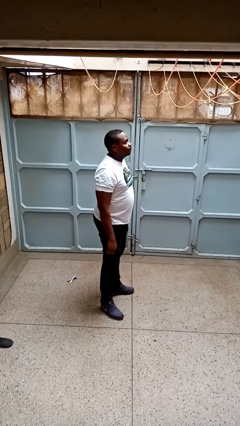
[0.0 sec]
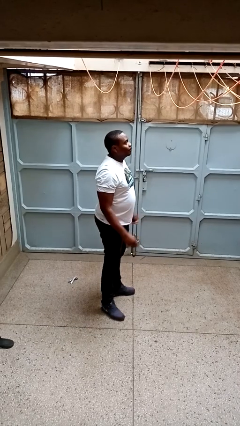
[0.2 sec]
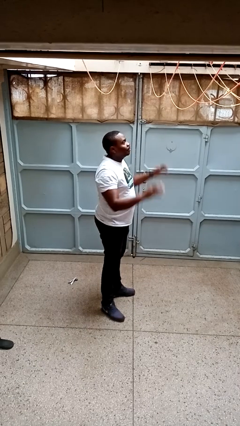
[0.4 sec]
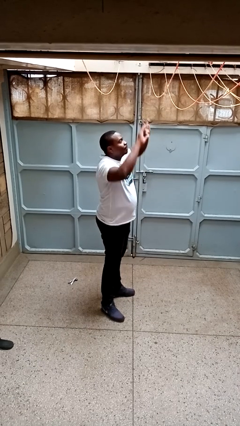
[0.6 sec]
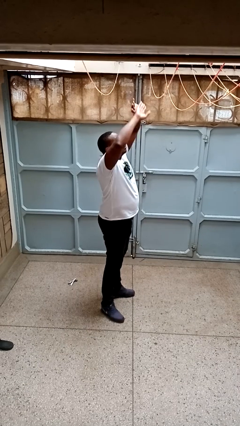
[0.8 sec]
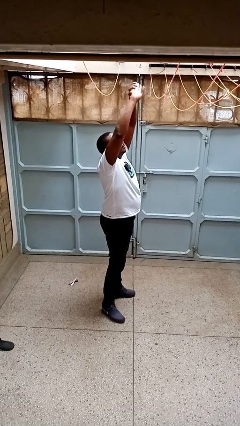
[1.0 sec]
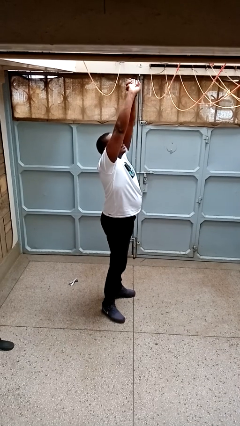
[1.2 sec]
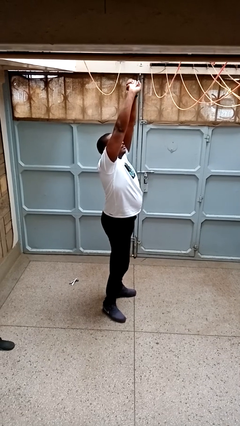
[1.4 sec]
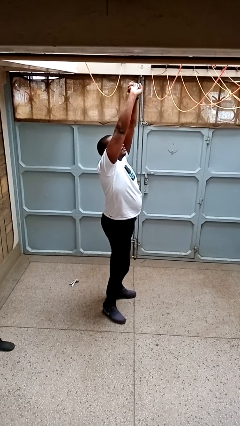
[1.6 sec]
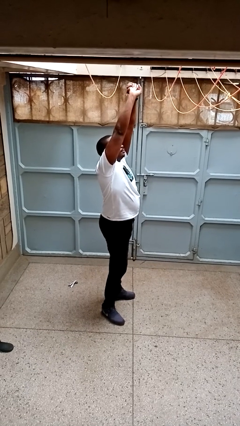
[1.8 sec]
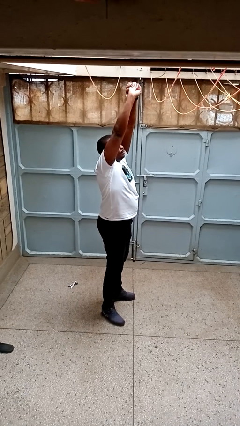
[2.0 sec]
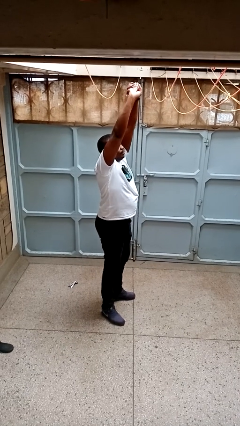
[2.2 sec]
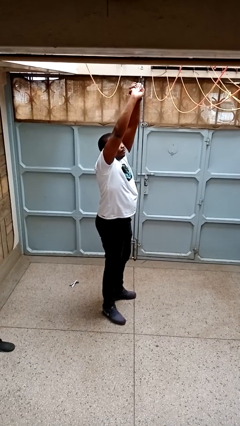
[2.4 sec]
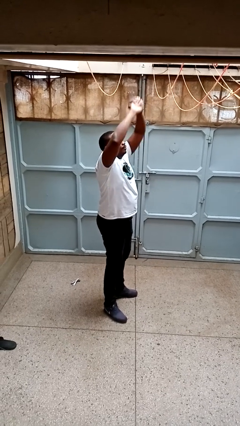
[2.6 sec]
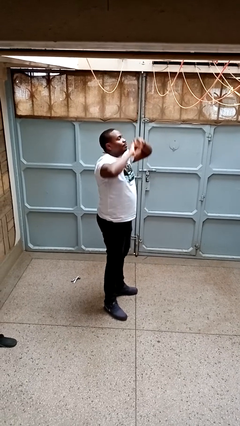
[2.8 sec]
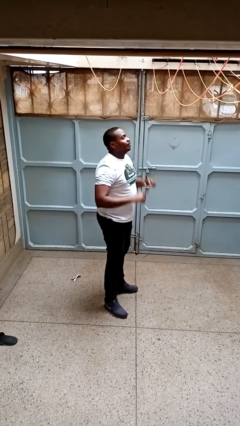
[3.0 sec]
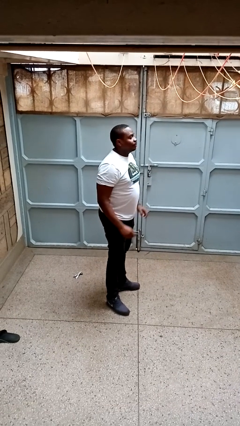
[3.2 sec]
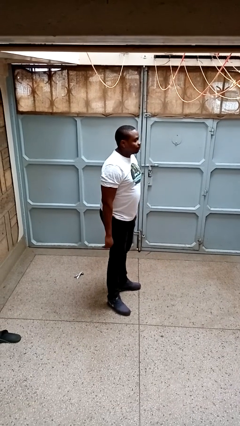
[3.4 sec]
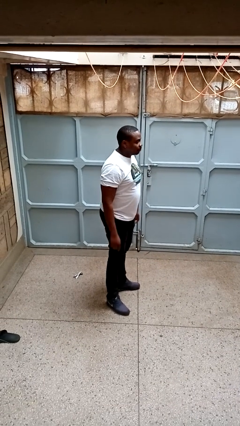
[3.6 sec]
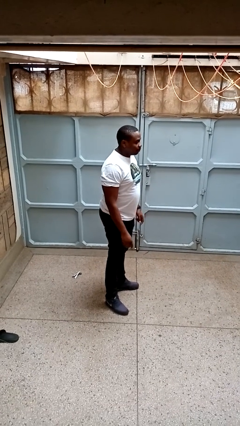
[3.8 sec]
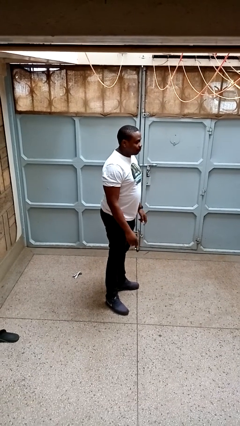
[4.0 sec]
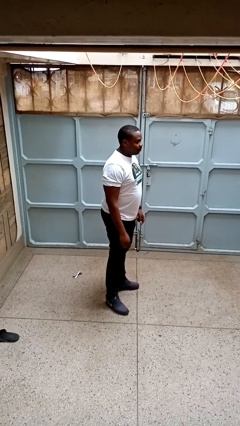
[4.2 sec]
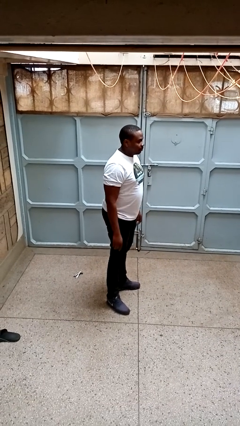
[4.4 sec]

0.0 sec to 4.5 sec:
person stretches arms over head

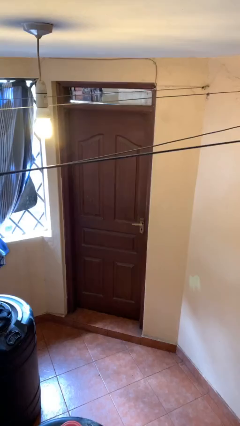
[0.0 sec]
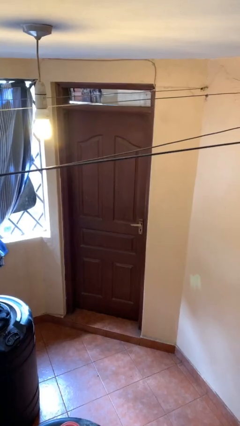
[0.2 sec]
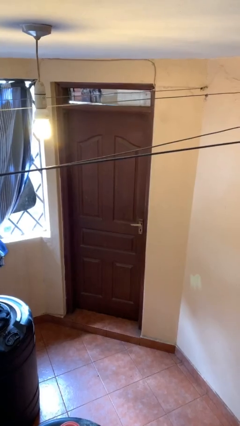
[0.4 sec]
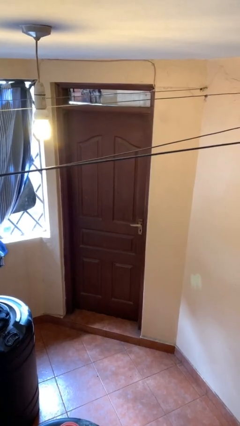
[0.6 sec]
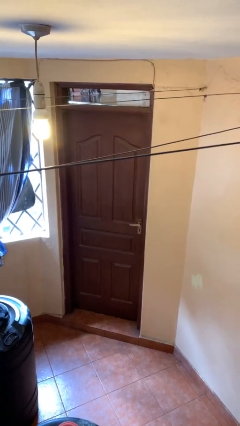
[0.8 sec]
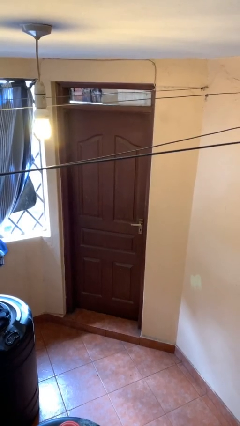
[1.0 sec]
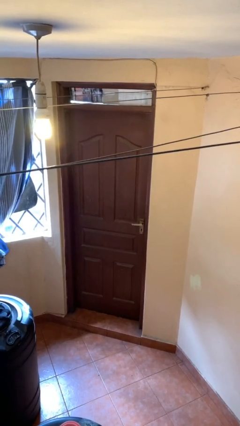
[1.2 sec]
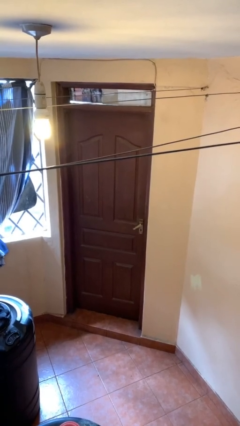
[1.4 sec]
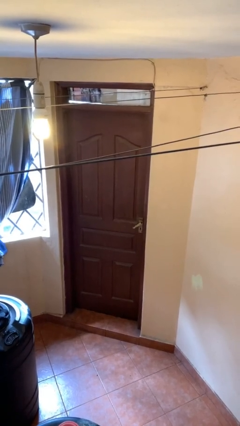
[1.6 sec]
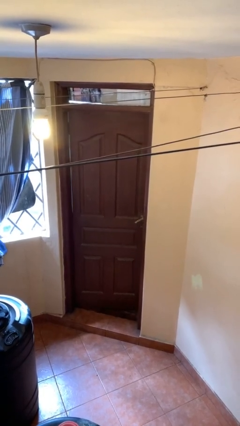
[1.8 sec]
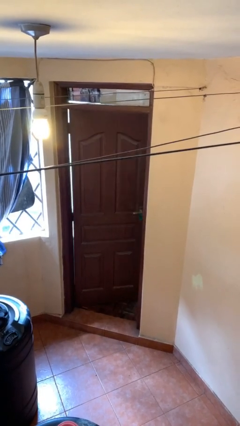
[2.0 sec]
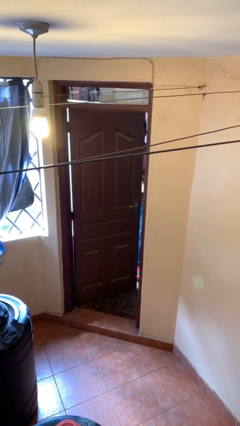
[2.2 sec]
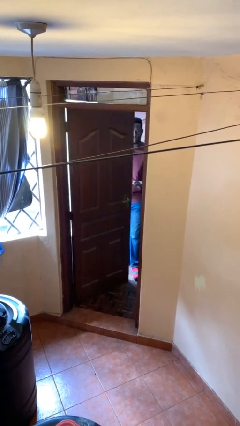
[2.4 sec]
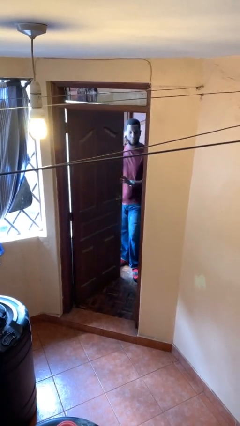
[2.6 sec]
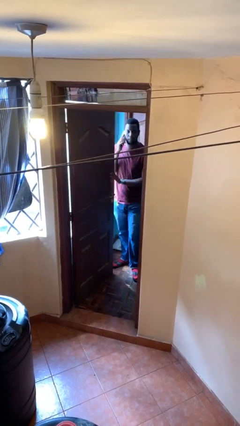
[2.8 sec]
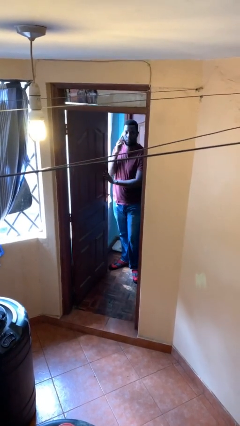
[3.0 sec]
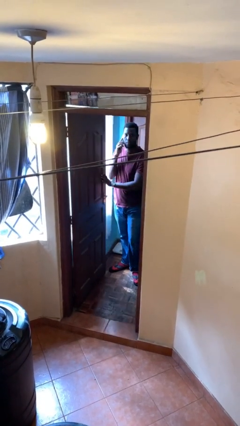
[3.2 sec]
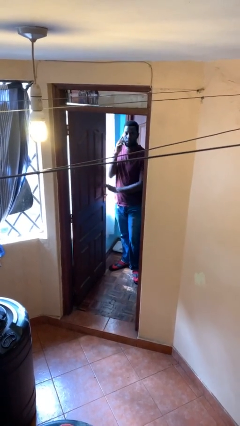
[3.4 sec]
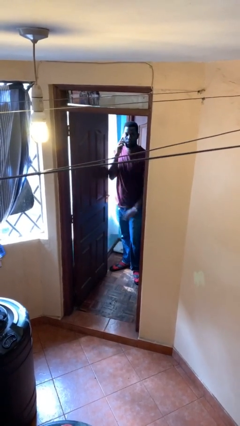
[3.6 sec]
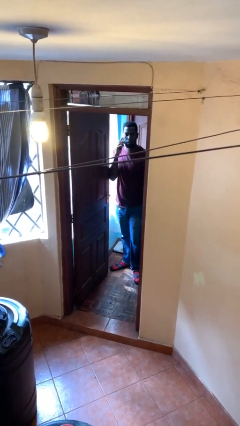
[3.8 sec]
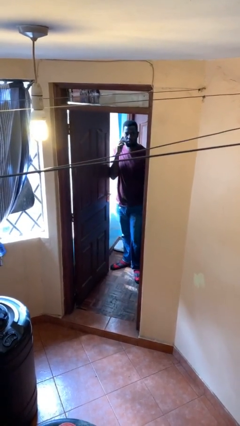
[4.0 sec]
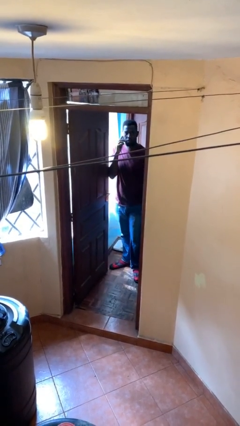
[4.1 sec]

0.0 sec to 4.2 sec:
person opens facility door

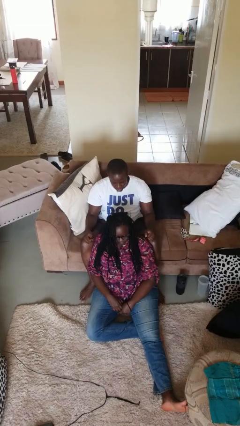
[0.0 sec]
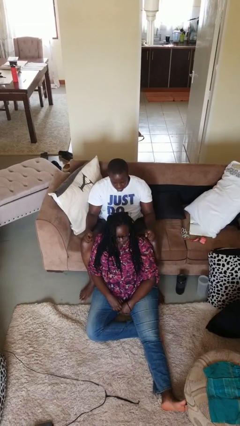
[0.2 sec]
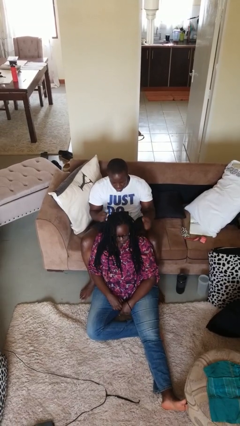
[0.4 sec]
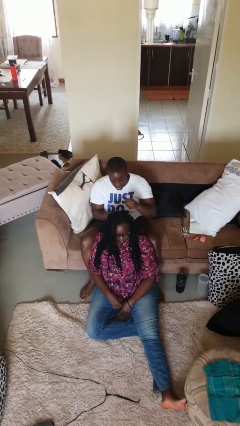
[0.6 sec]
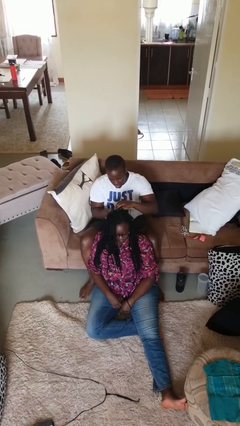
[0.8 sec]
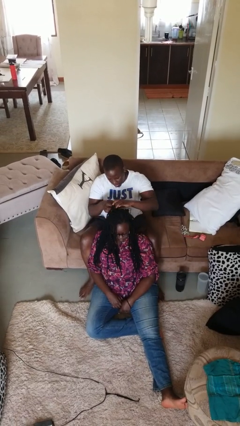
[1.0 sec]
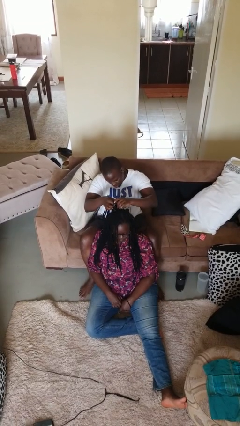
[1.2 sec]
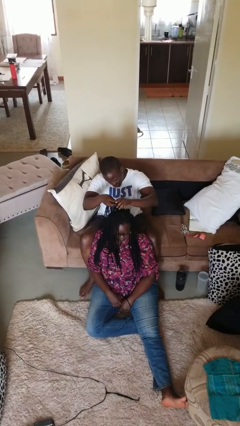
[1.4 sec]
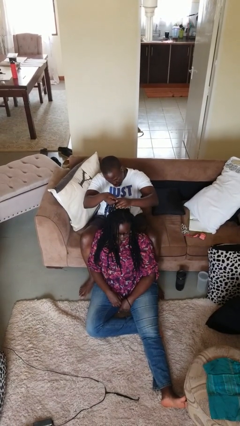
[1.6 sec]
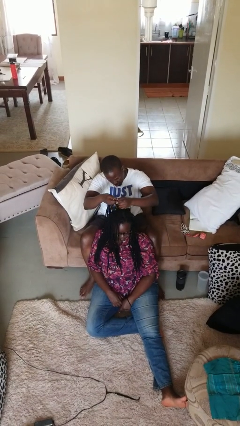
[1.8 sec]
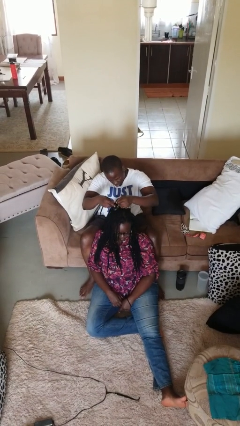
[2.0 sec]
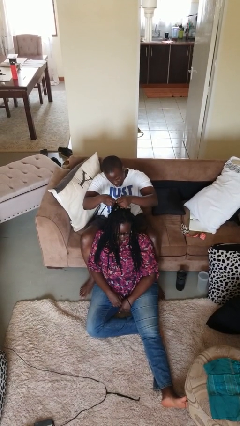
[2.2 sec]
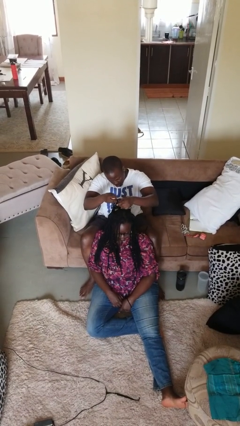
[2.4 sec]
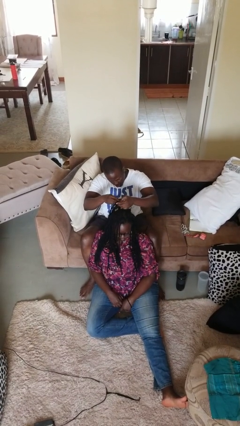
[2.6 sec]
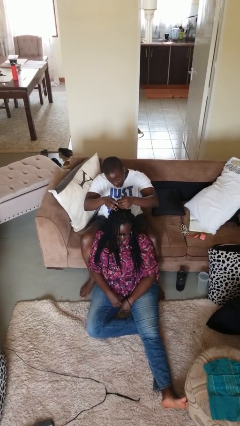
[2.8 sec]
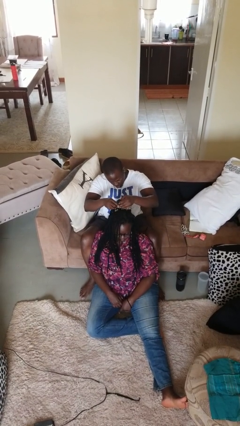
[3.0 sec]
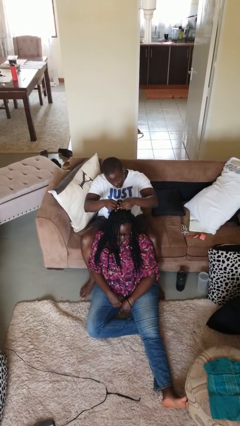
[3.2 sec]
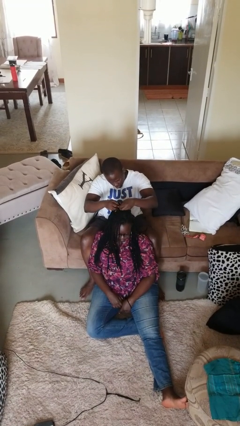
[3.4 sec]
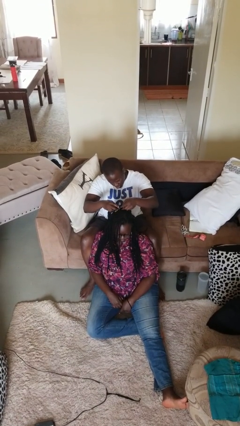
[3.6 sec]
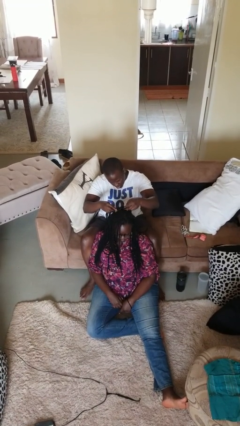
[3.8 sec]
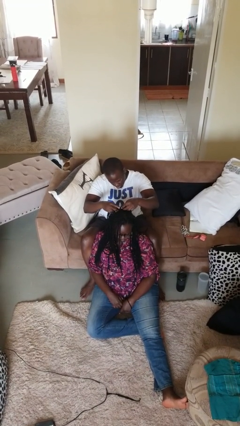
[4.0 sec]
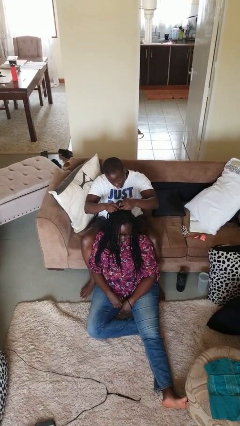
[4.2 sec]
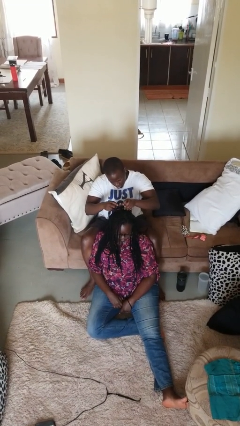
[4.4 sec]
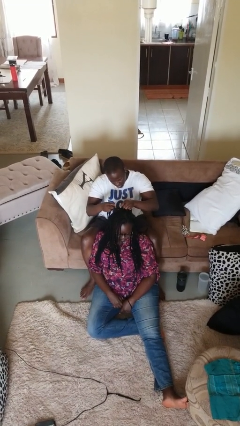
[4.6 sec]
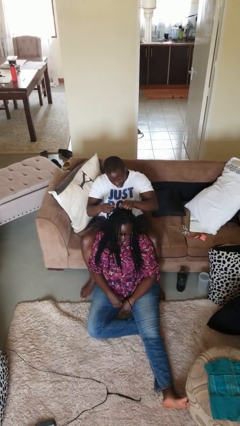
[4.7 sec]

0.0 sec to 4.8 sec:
person braids hair of person

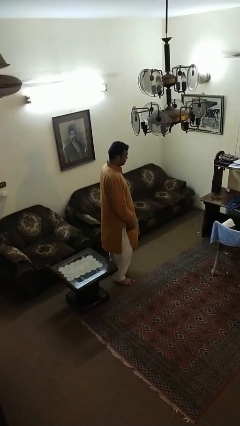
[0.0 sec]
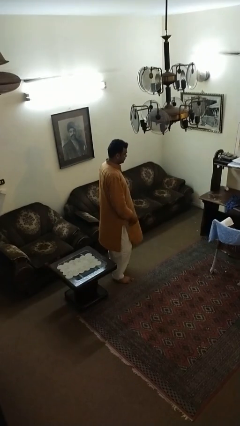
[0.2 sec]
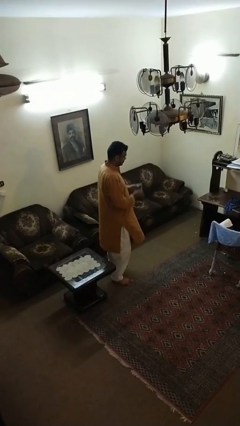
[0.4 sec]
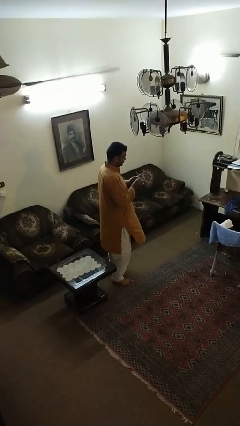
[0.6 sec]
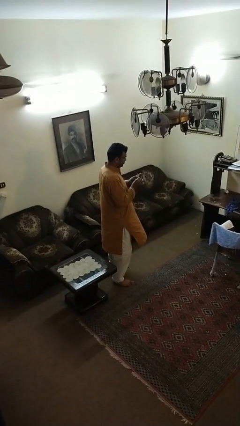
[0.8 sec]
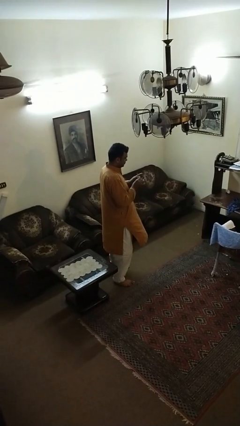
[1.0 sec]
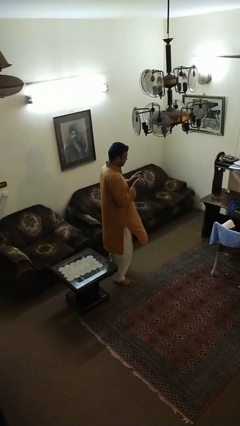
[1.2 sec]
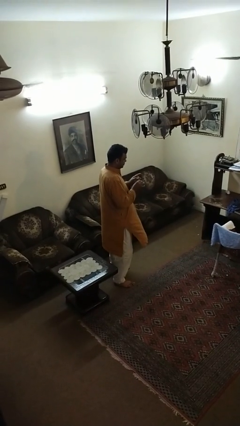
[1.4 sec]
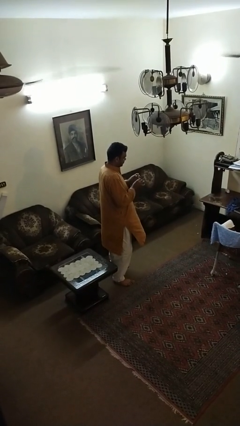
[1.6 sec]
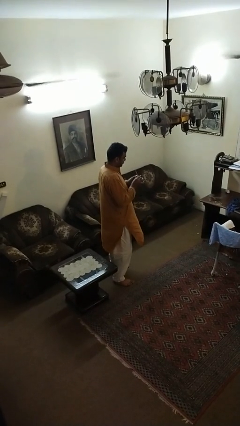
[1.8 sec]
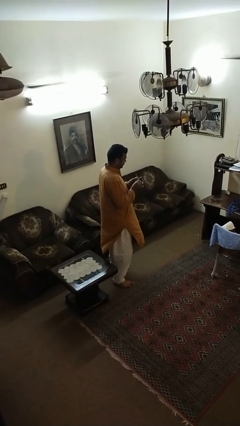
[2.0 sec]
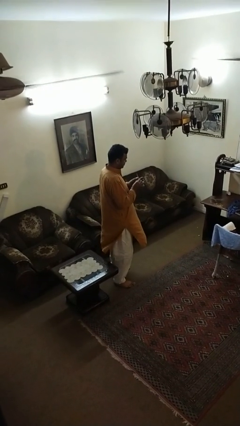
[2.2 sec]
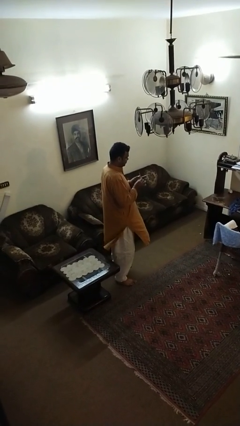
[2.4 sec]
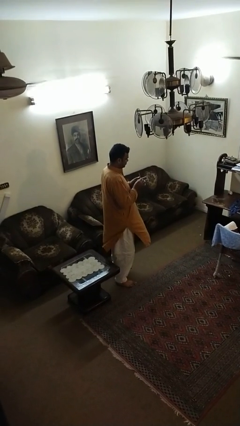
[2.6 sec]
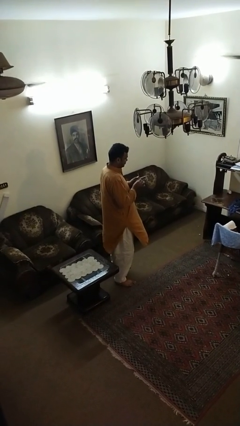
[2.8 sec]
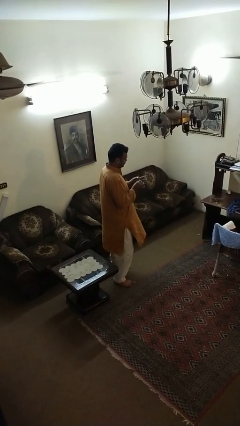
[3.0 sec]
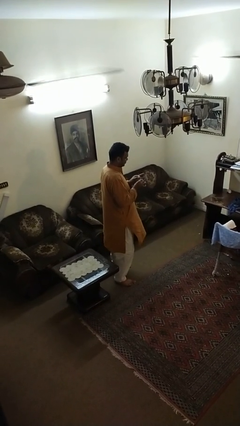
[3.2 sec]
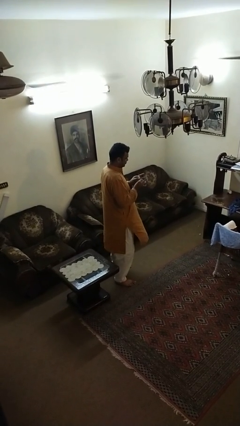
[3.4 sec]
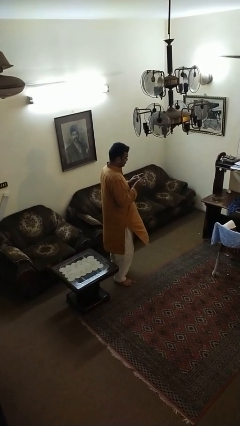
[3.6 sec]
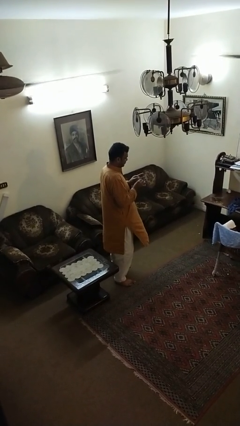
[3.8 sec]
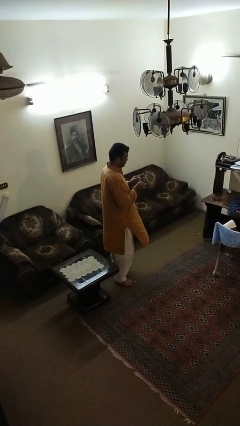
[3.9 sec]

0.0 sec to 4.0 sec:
person files fingernails
